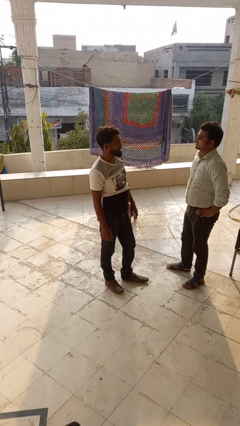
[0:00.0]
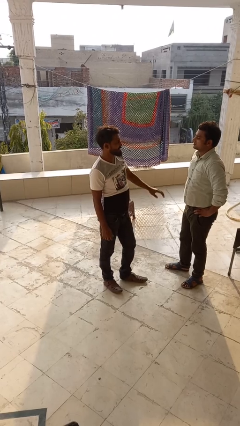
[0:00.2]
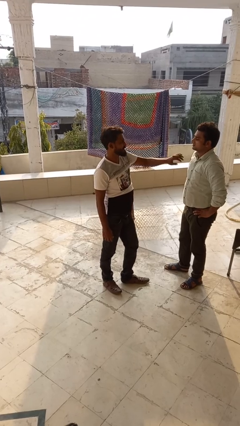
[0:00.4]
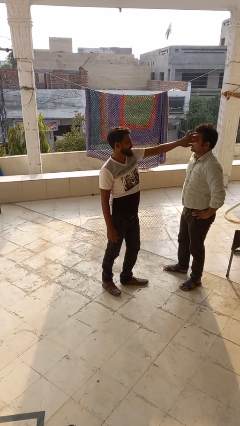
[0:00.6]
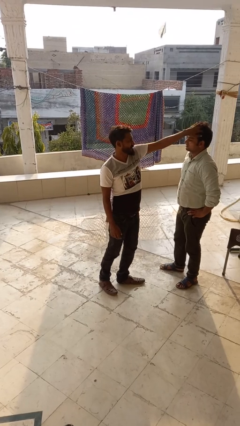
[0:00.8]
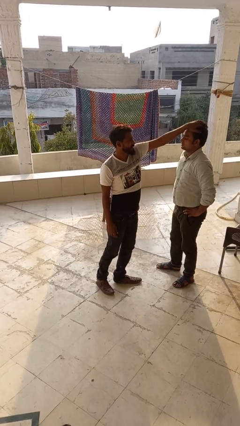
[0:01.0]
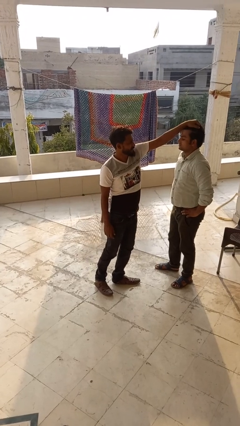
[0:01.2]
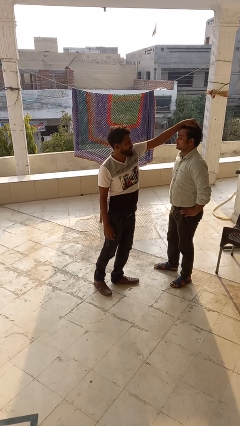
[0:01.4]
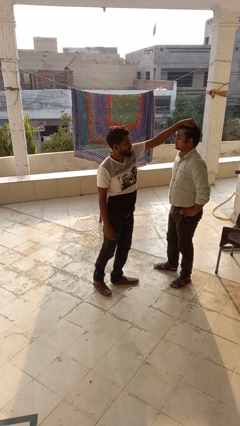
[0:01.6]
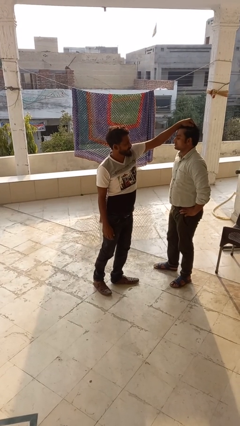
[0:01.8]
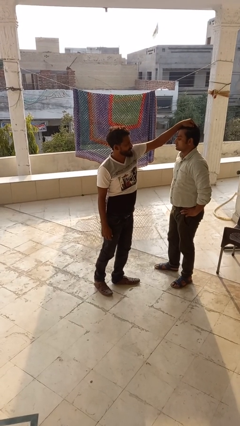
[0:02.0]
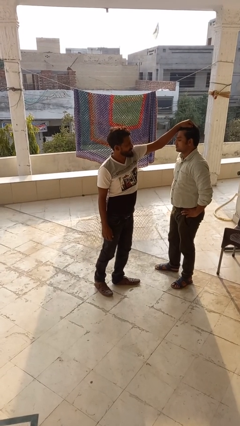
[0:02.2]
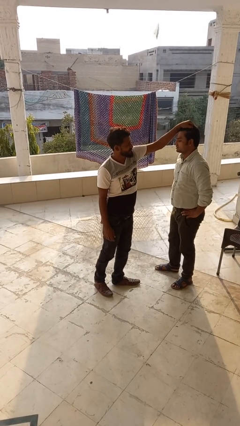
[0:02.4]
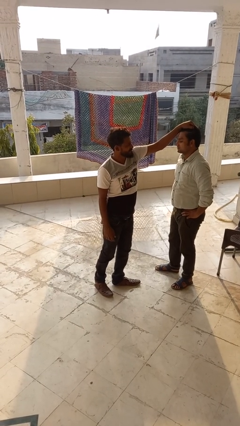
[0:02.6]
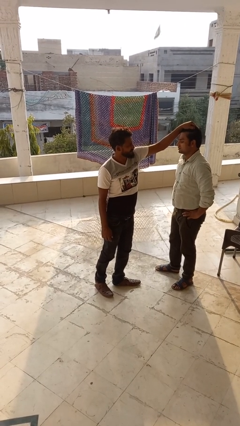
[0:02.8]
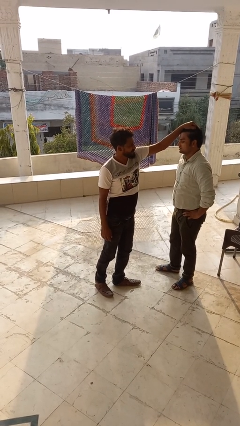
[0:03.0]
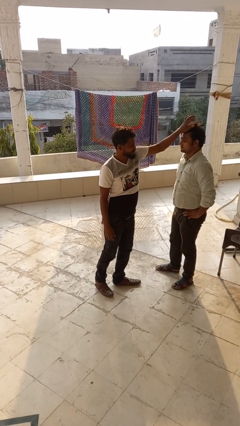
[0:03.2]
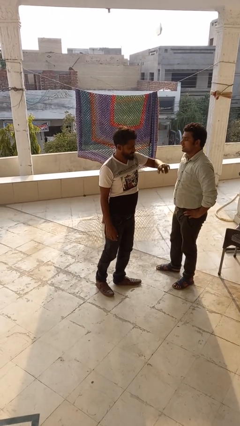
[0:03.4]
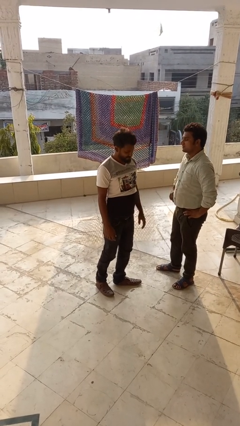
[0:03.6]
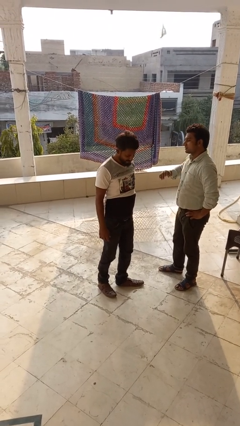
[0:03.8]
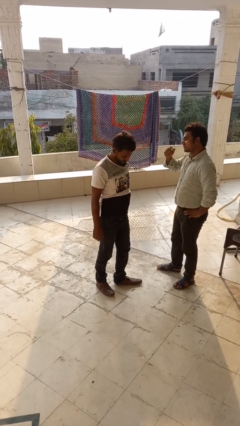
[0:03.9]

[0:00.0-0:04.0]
person grabs person by hair

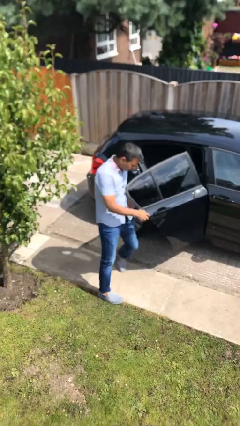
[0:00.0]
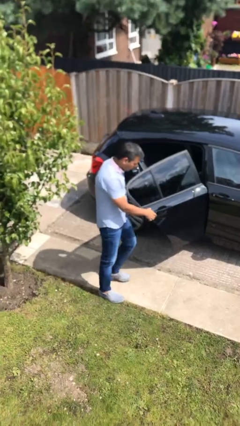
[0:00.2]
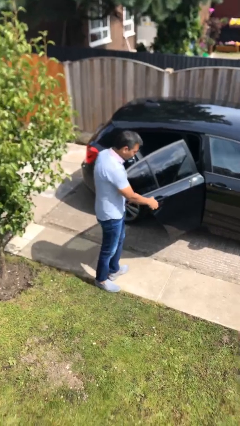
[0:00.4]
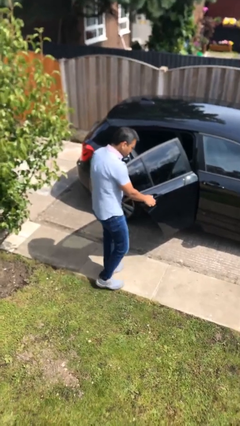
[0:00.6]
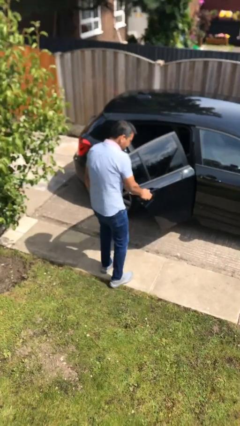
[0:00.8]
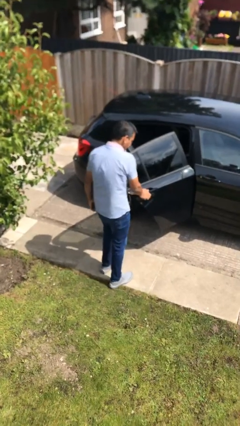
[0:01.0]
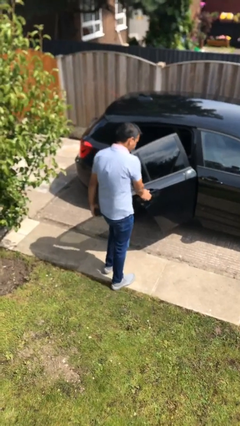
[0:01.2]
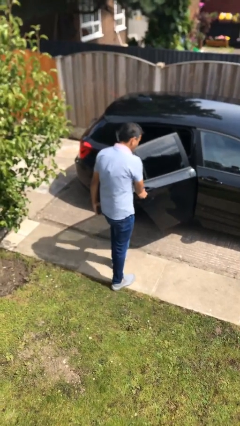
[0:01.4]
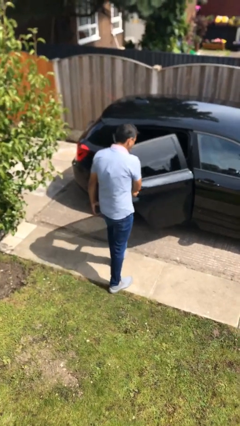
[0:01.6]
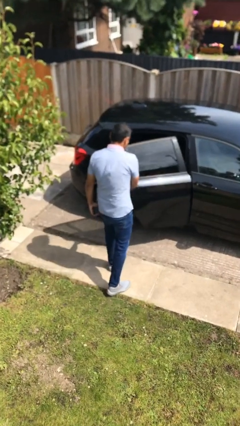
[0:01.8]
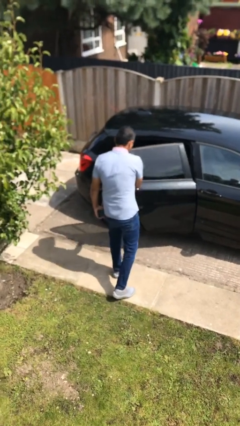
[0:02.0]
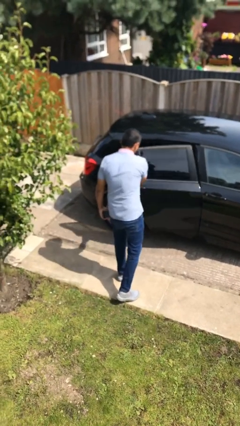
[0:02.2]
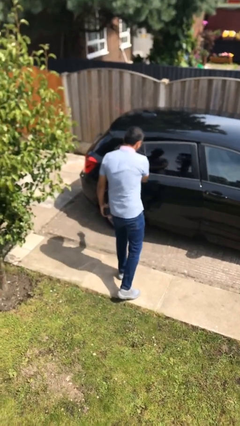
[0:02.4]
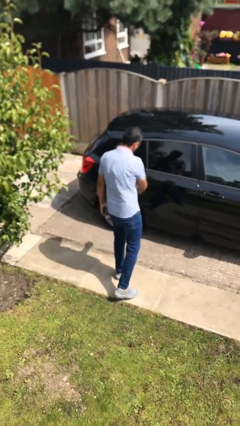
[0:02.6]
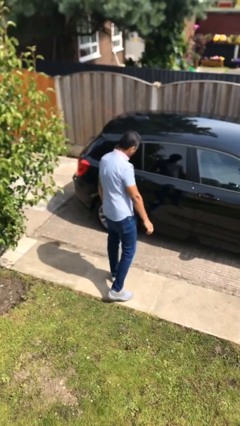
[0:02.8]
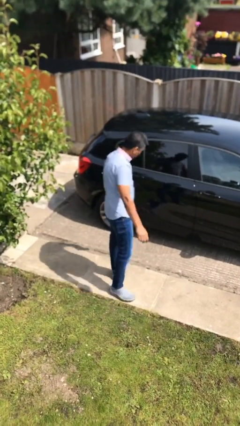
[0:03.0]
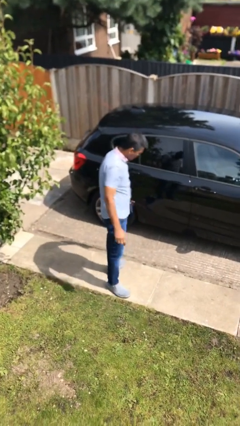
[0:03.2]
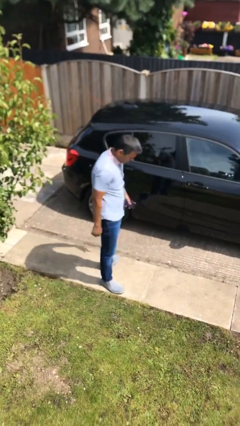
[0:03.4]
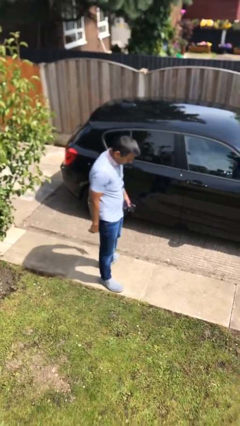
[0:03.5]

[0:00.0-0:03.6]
person closes car door

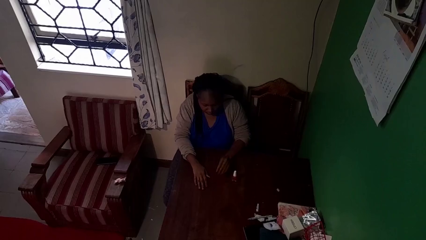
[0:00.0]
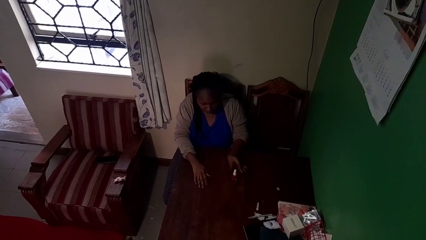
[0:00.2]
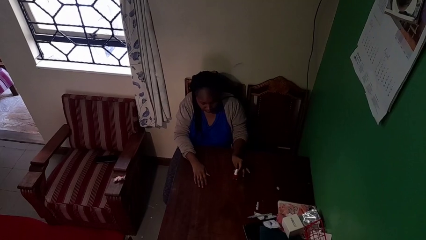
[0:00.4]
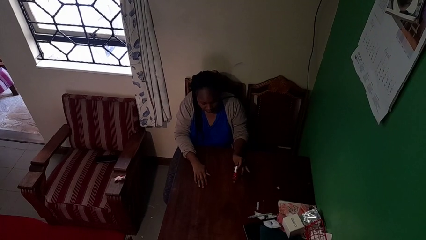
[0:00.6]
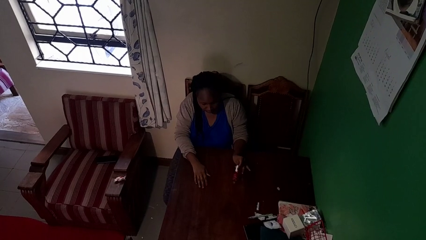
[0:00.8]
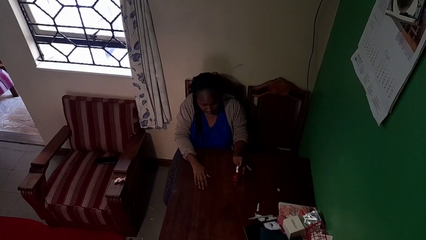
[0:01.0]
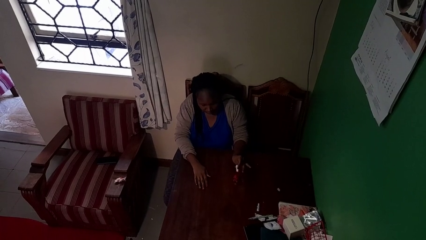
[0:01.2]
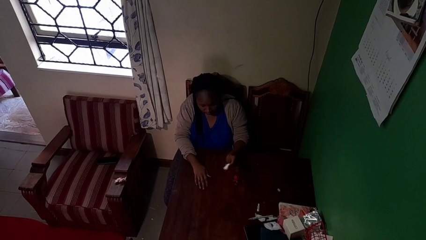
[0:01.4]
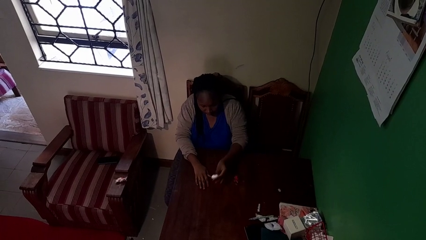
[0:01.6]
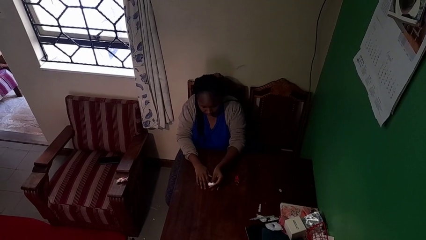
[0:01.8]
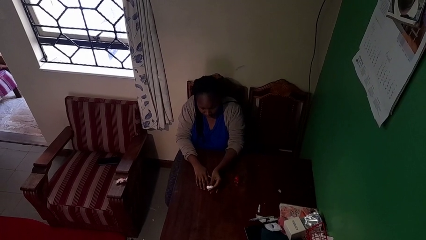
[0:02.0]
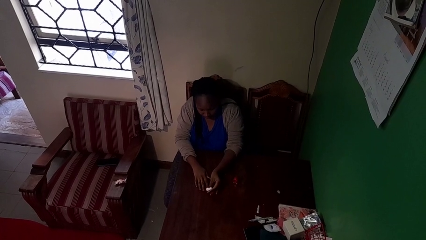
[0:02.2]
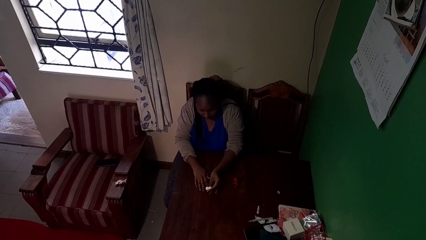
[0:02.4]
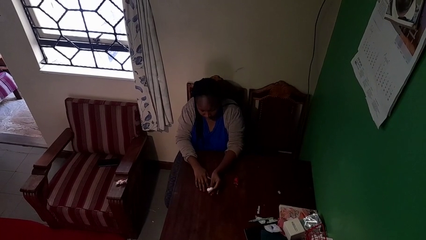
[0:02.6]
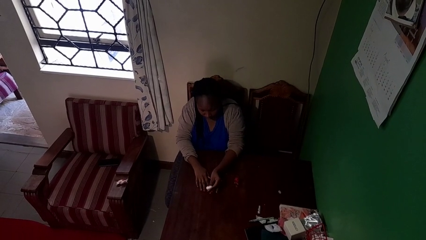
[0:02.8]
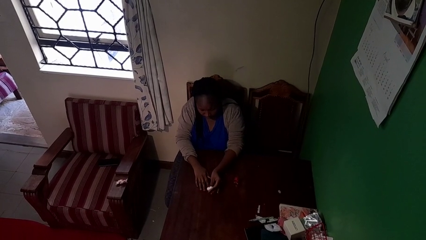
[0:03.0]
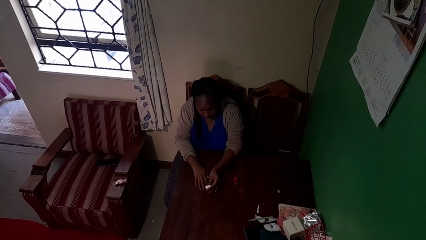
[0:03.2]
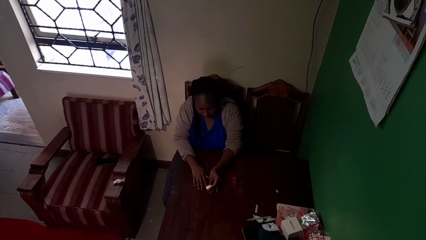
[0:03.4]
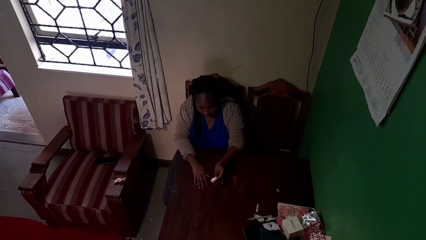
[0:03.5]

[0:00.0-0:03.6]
person paints fingernails

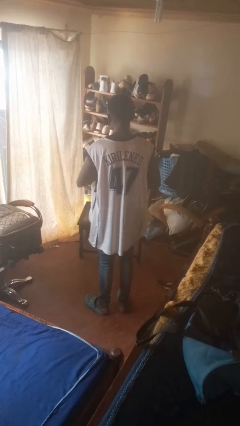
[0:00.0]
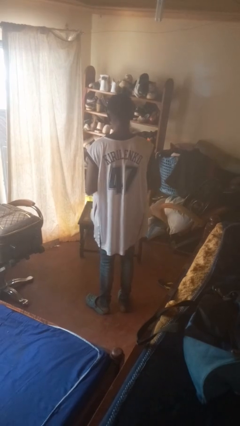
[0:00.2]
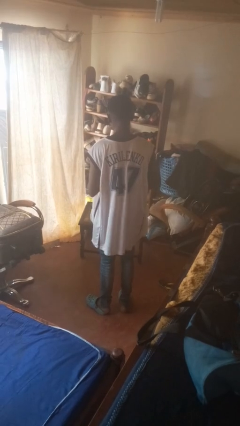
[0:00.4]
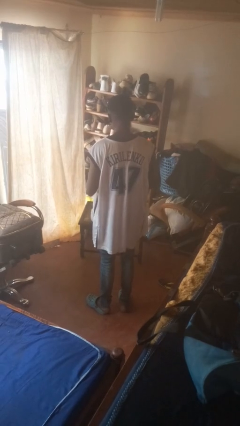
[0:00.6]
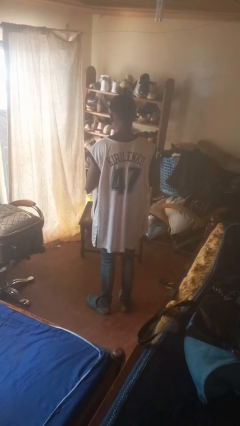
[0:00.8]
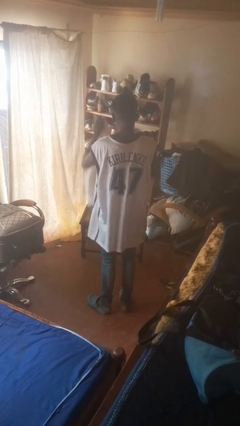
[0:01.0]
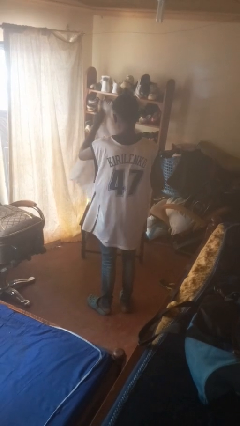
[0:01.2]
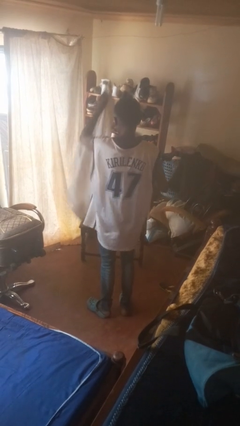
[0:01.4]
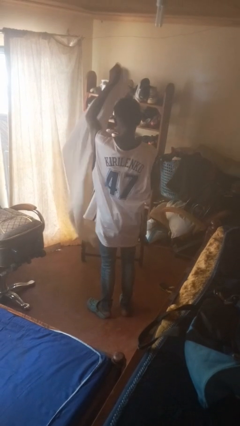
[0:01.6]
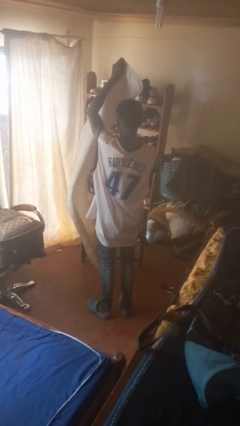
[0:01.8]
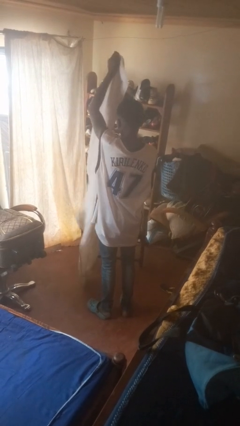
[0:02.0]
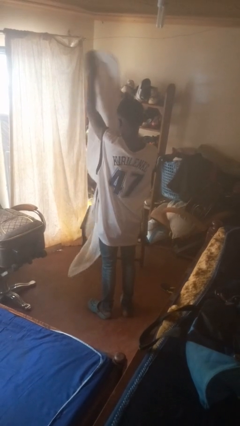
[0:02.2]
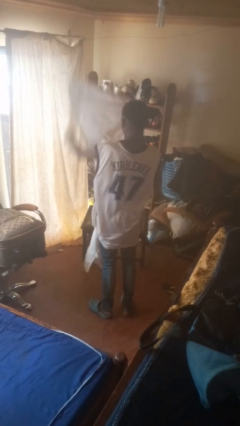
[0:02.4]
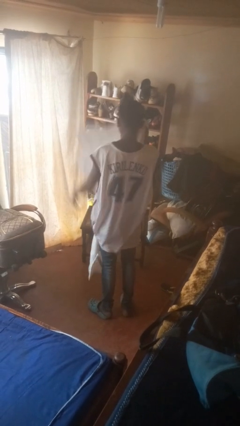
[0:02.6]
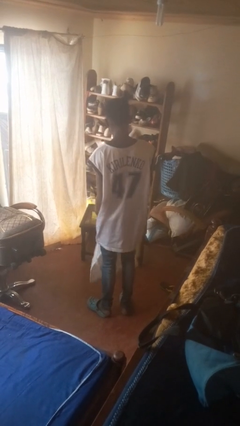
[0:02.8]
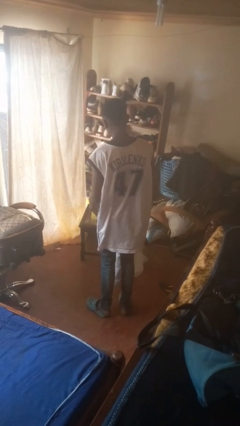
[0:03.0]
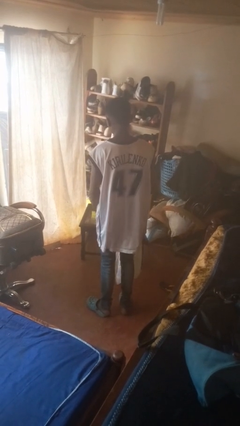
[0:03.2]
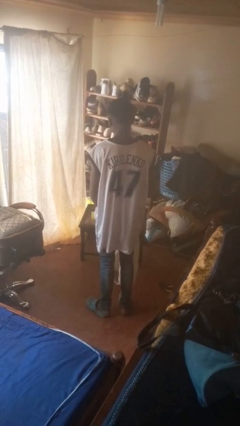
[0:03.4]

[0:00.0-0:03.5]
person unfolds blanket

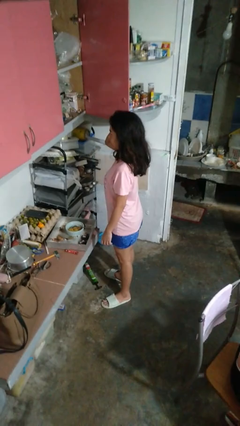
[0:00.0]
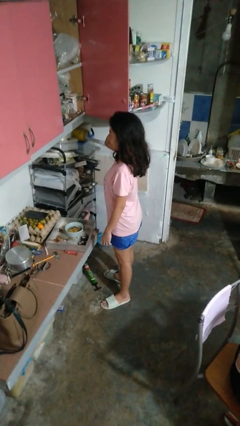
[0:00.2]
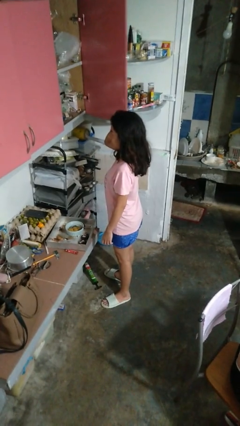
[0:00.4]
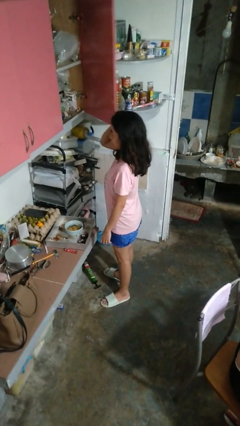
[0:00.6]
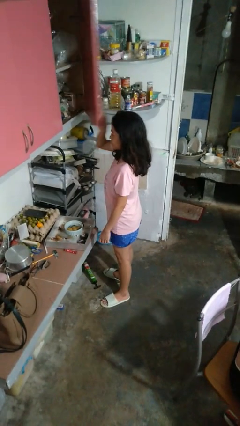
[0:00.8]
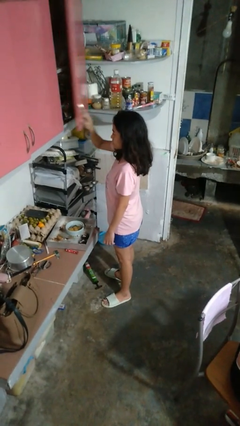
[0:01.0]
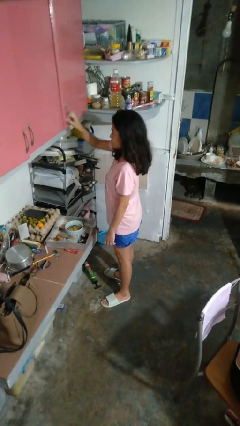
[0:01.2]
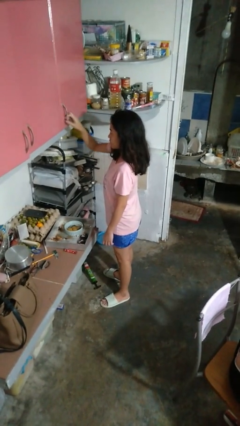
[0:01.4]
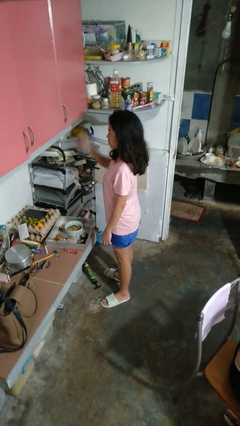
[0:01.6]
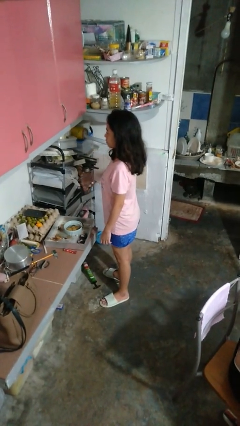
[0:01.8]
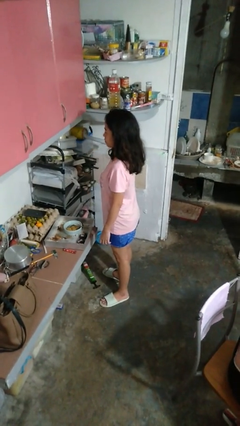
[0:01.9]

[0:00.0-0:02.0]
person closes cabinet

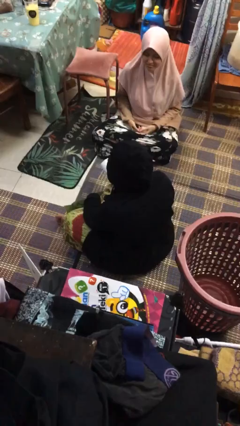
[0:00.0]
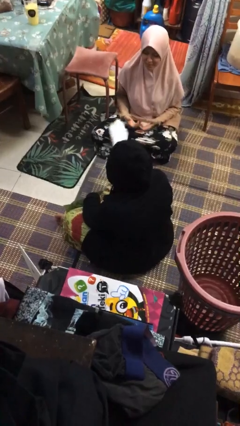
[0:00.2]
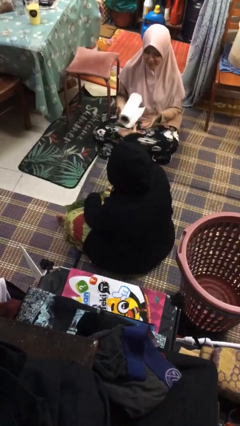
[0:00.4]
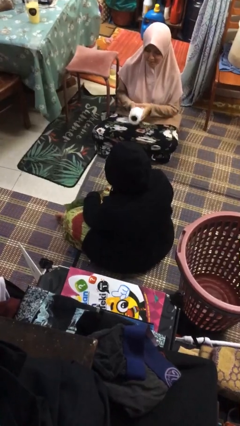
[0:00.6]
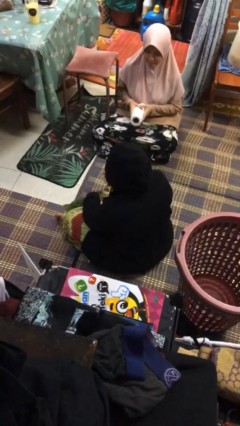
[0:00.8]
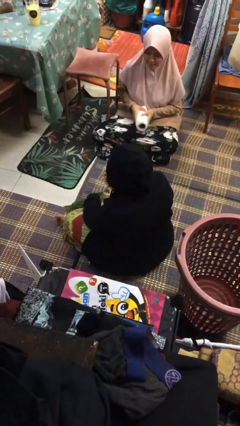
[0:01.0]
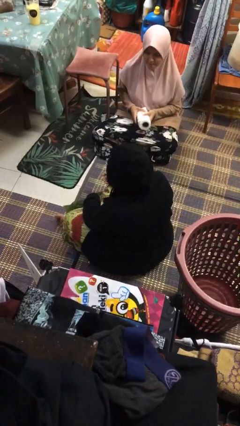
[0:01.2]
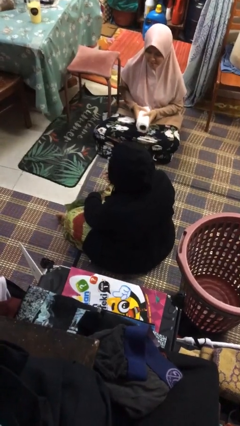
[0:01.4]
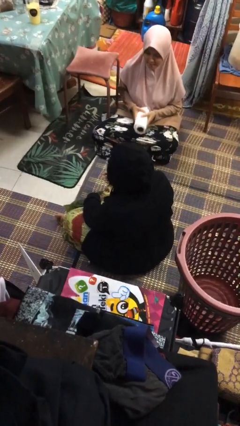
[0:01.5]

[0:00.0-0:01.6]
person throws object to person
